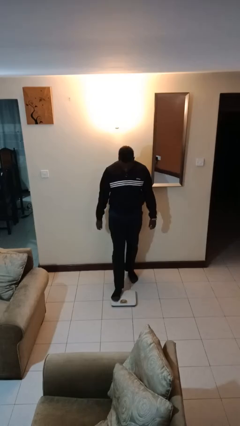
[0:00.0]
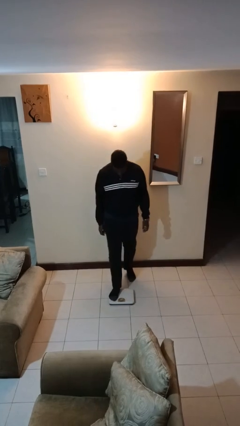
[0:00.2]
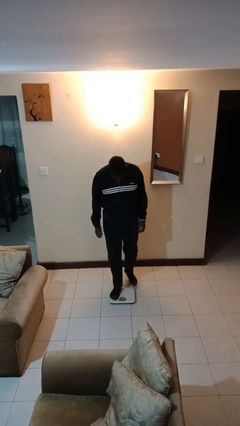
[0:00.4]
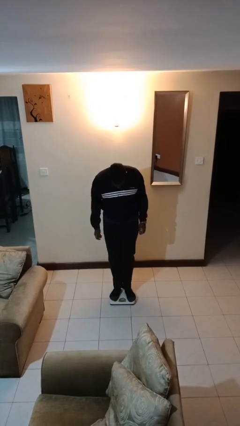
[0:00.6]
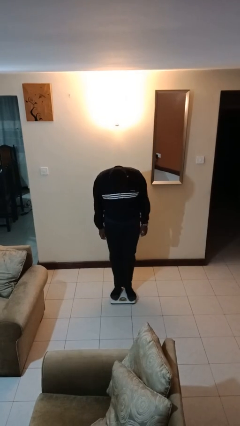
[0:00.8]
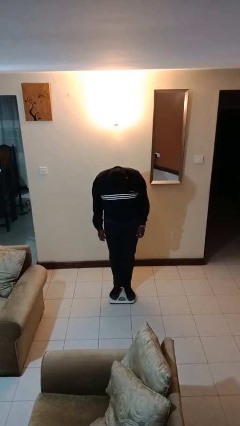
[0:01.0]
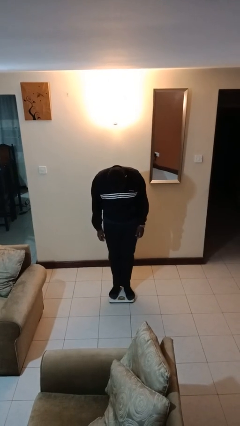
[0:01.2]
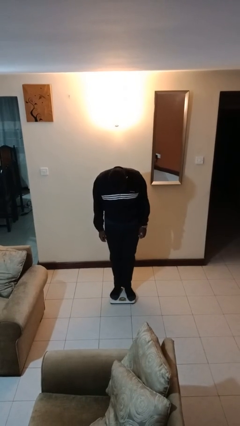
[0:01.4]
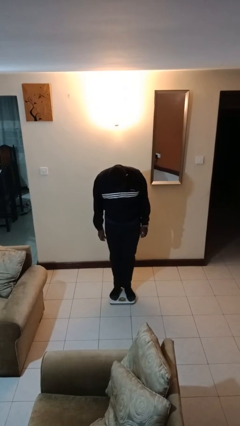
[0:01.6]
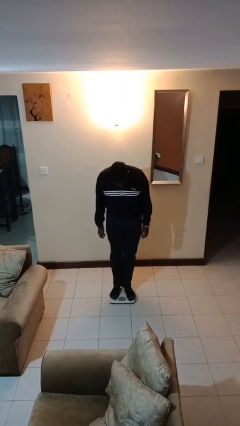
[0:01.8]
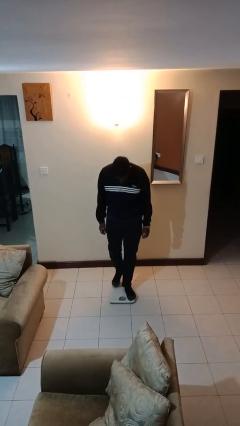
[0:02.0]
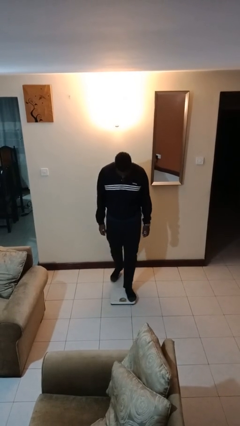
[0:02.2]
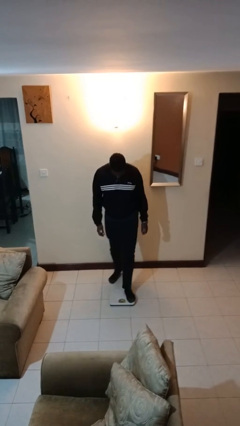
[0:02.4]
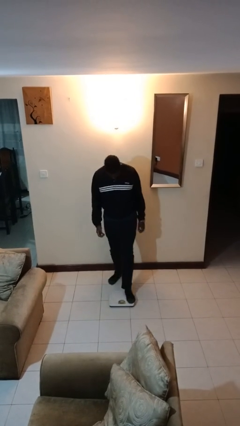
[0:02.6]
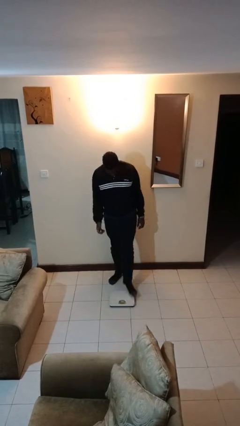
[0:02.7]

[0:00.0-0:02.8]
person uses bodyweight scale

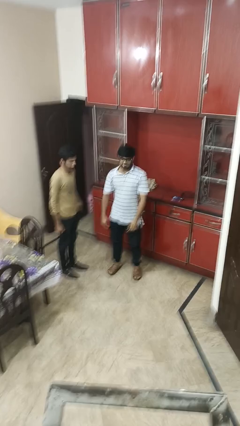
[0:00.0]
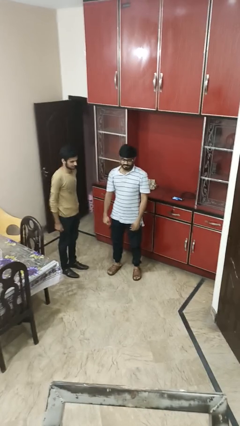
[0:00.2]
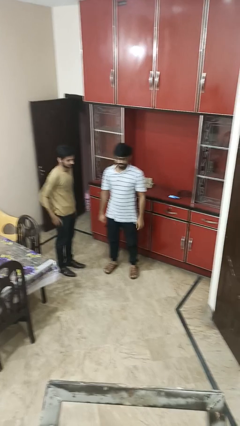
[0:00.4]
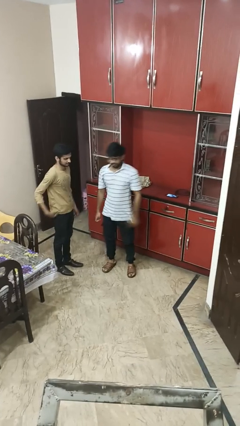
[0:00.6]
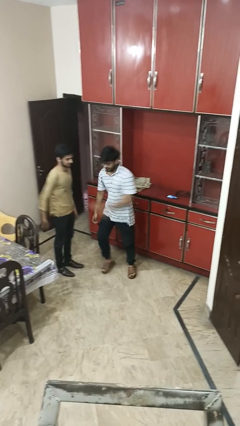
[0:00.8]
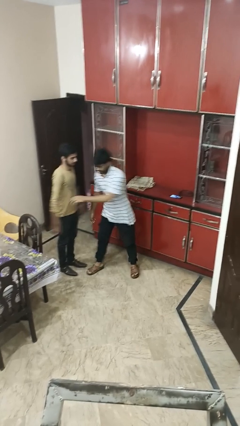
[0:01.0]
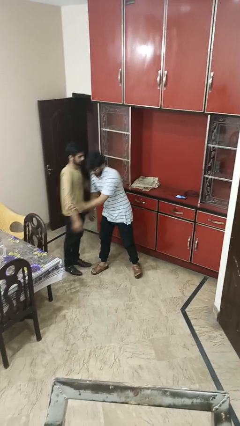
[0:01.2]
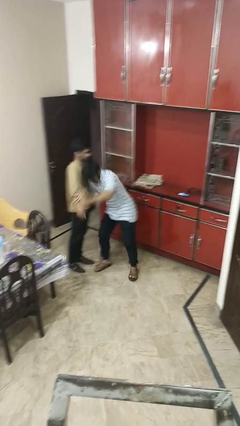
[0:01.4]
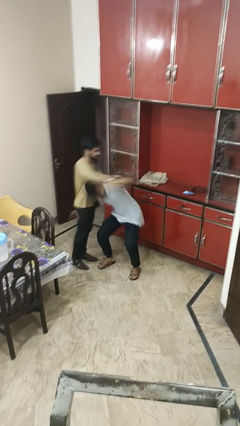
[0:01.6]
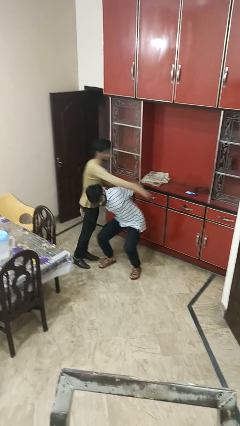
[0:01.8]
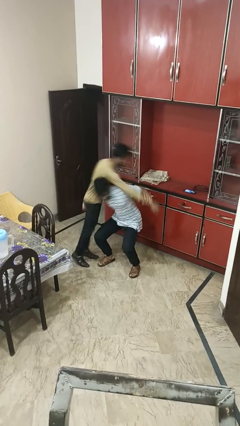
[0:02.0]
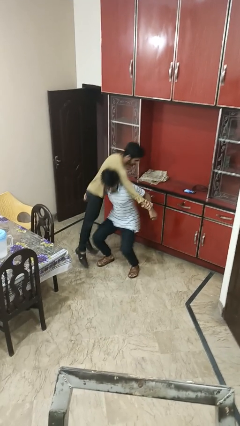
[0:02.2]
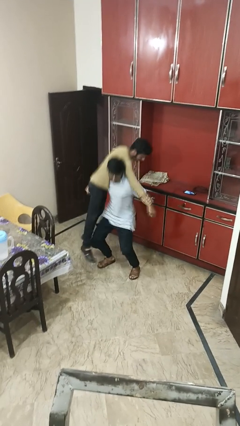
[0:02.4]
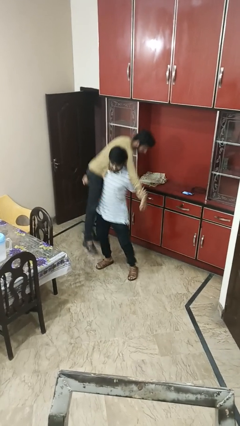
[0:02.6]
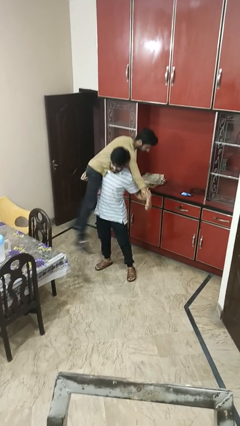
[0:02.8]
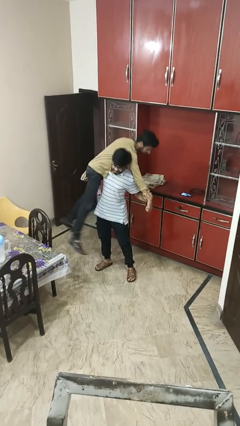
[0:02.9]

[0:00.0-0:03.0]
person carries person over shoulder

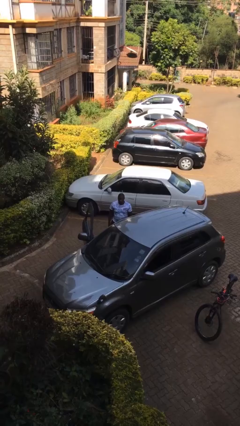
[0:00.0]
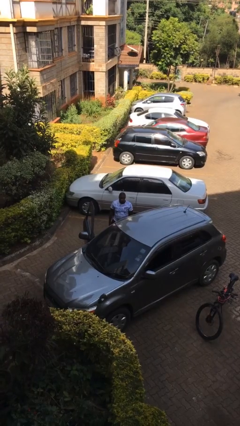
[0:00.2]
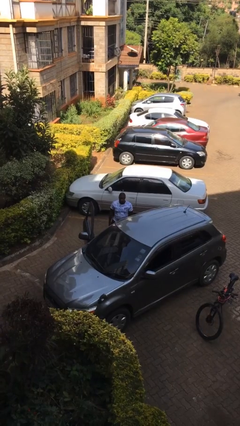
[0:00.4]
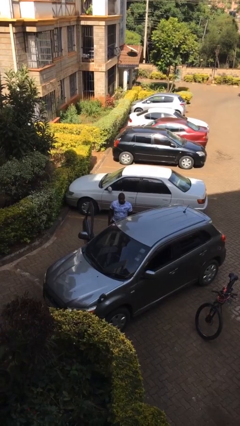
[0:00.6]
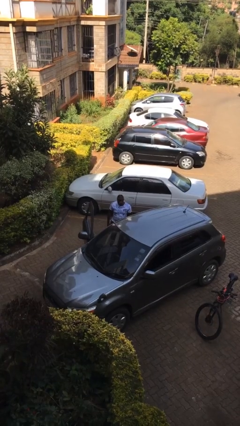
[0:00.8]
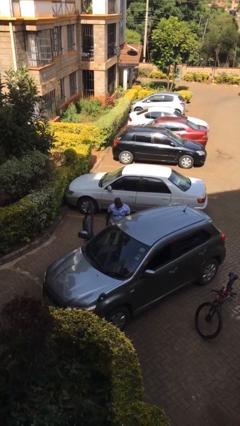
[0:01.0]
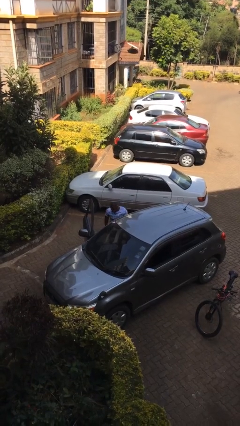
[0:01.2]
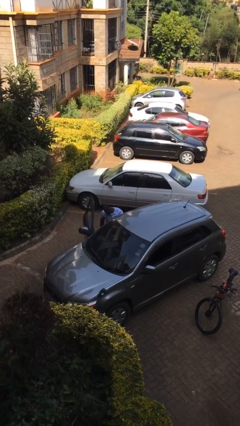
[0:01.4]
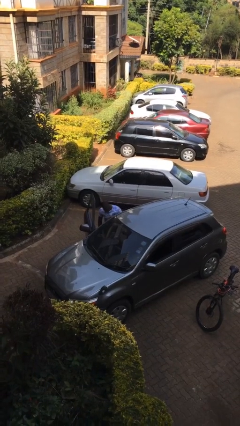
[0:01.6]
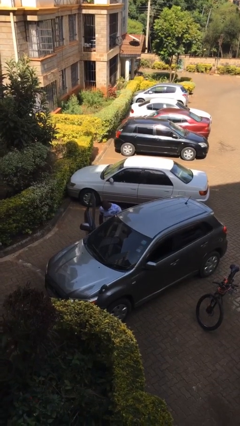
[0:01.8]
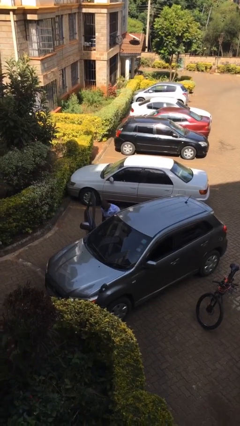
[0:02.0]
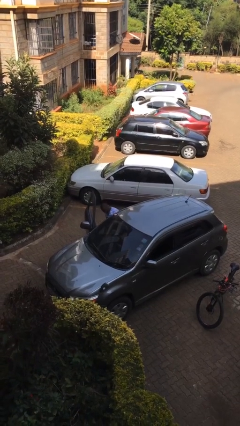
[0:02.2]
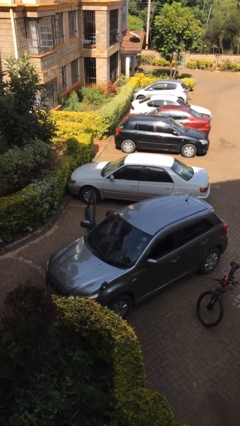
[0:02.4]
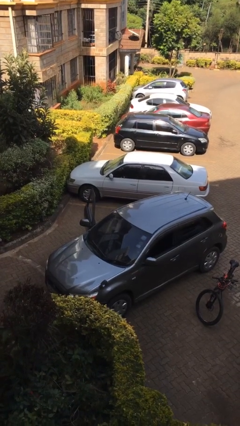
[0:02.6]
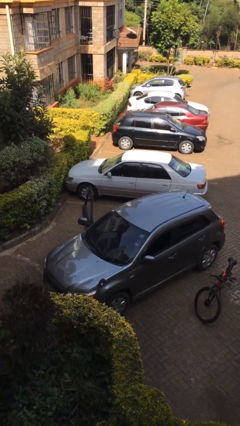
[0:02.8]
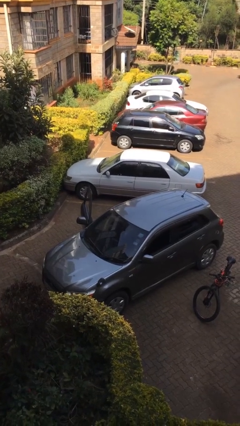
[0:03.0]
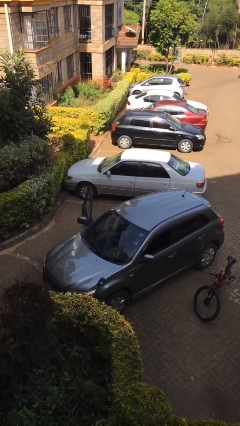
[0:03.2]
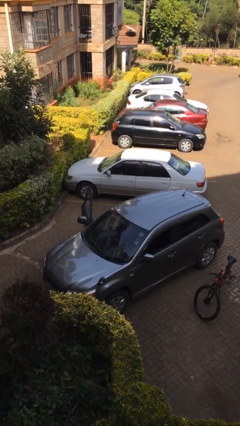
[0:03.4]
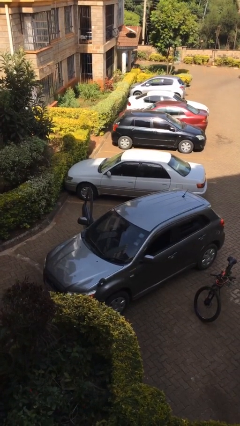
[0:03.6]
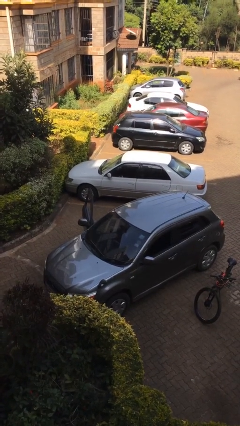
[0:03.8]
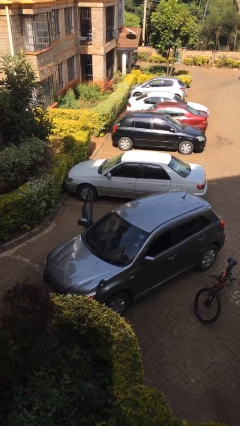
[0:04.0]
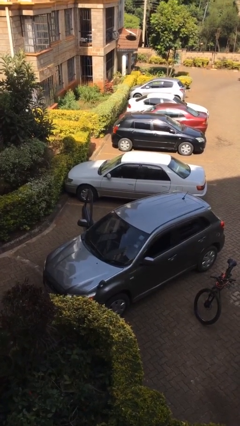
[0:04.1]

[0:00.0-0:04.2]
person enters car

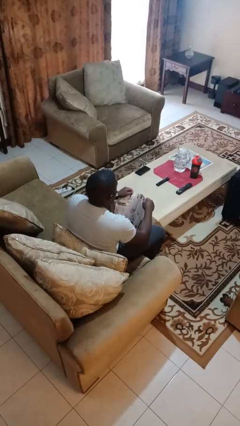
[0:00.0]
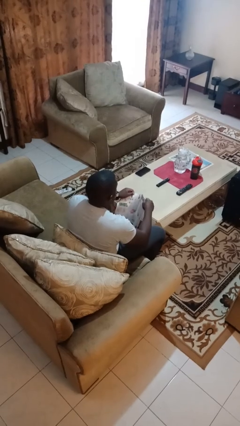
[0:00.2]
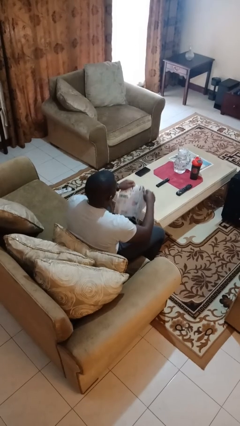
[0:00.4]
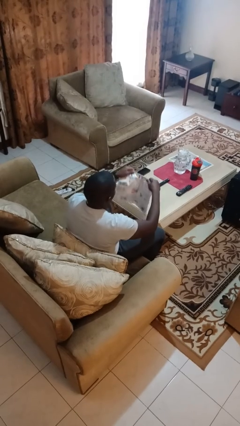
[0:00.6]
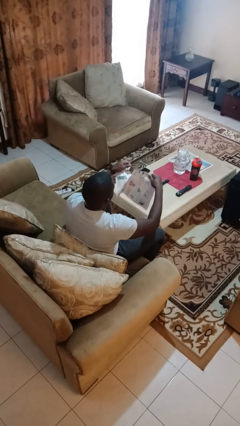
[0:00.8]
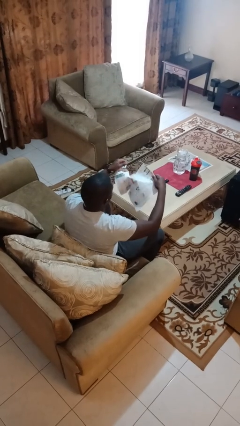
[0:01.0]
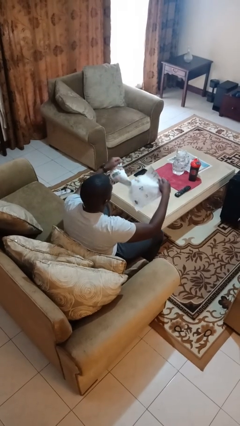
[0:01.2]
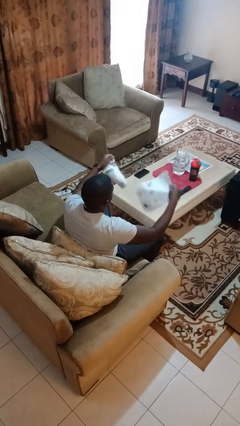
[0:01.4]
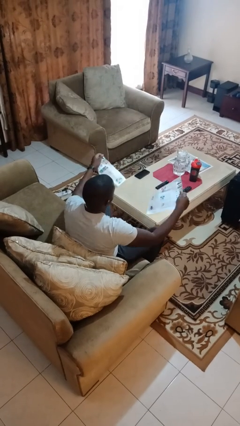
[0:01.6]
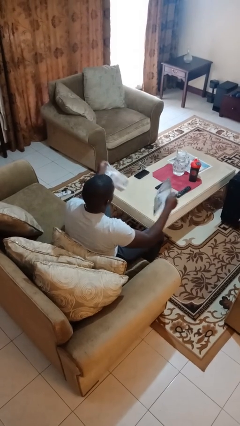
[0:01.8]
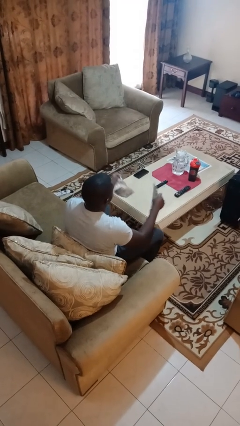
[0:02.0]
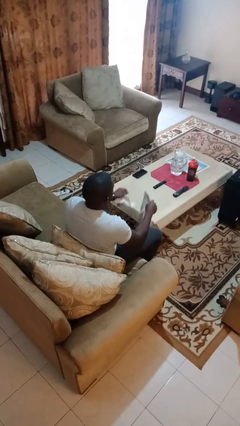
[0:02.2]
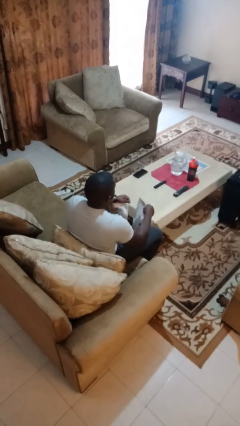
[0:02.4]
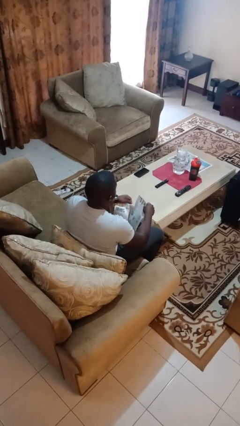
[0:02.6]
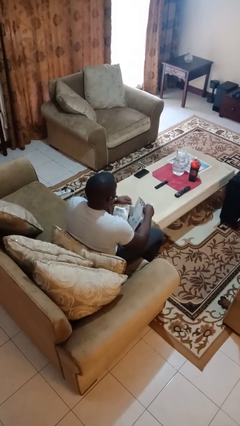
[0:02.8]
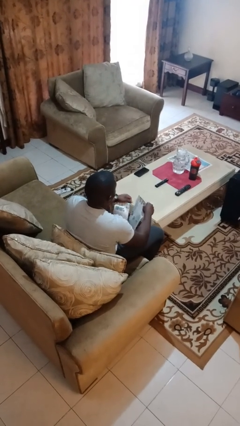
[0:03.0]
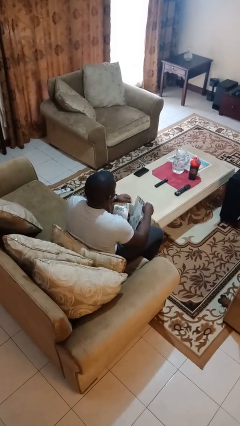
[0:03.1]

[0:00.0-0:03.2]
person tears paper

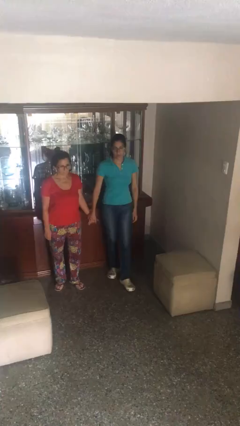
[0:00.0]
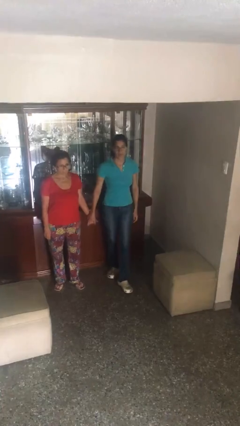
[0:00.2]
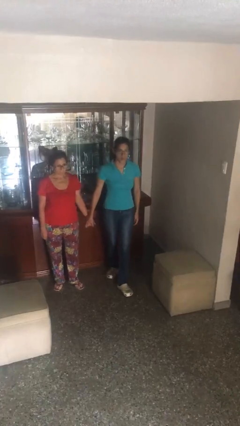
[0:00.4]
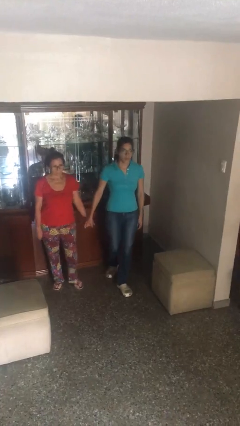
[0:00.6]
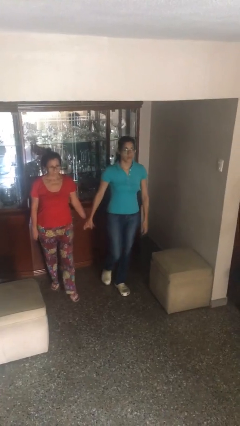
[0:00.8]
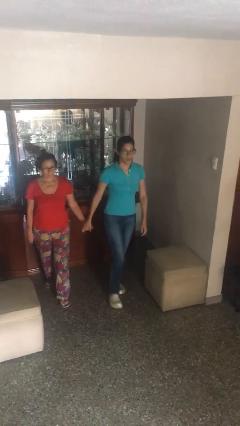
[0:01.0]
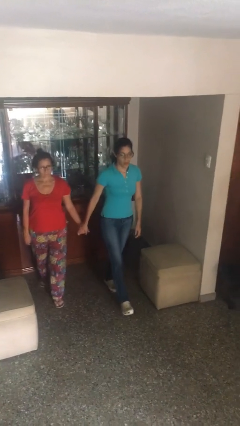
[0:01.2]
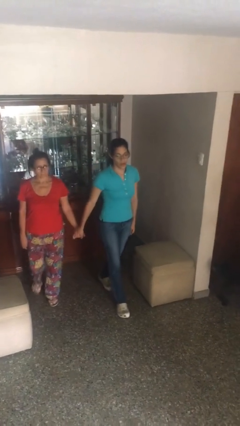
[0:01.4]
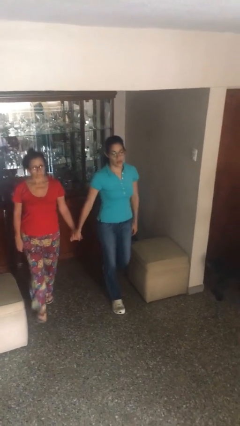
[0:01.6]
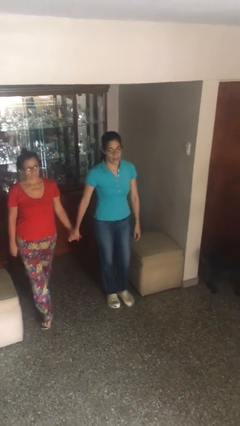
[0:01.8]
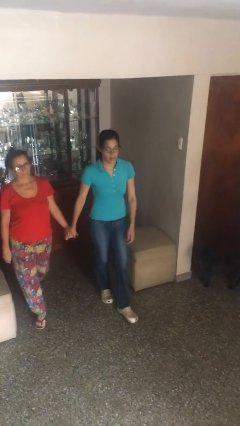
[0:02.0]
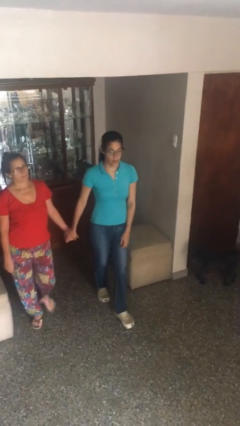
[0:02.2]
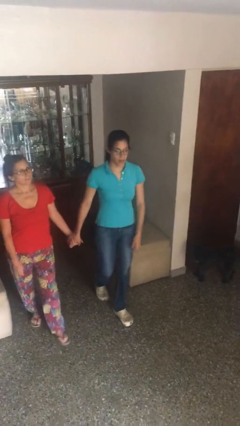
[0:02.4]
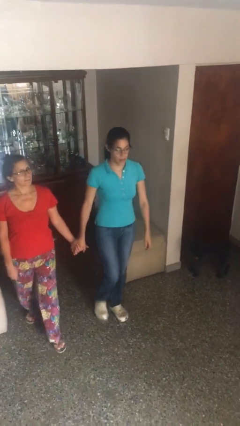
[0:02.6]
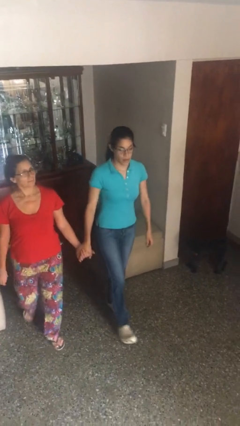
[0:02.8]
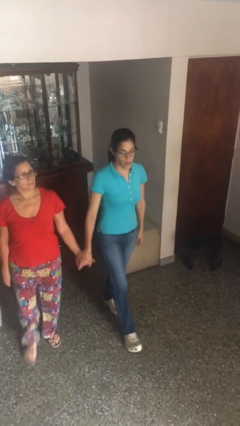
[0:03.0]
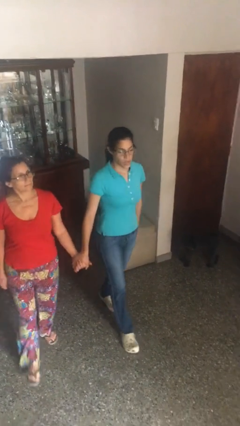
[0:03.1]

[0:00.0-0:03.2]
person holds hand

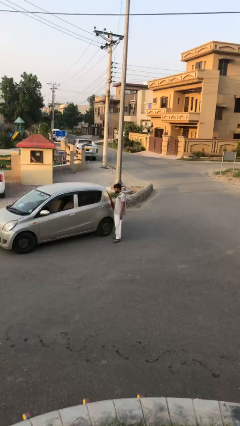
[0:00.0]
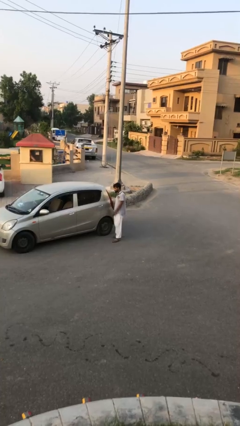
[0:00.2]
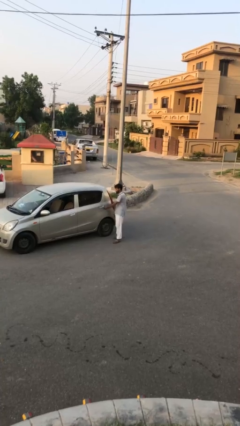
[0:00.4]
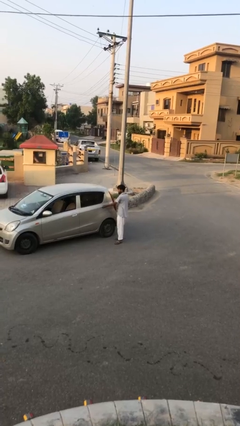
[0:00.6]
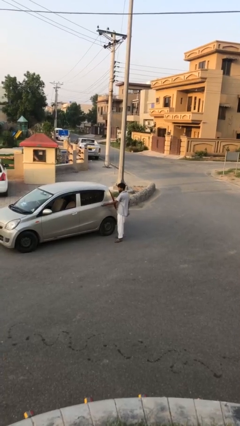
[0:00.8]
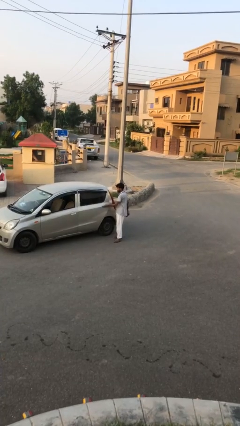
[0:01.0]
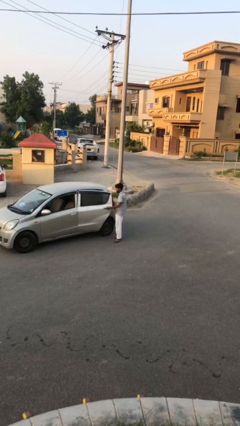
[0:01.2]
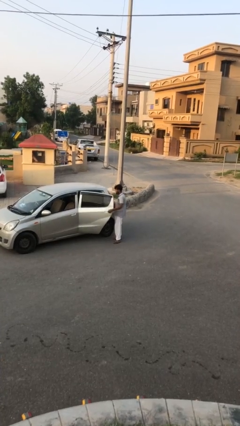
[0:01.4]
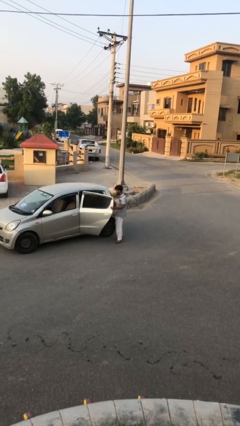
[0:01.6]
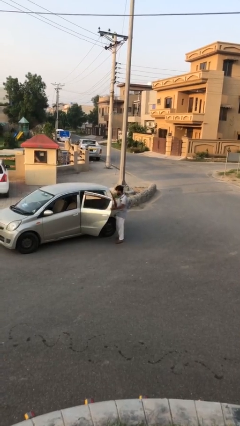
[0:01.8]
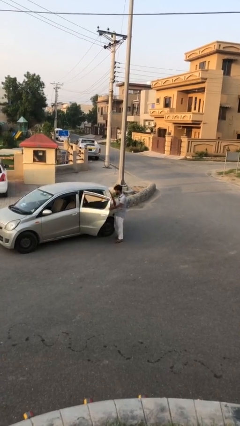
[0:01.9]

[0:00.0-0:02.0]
person opens car door
